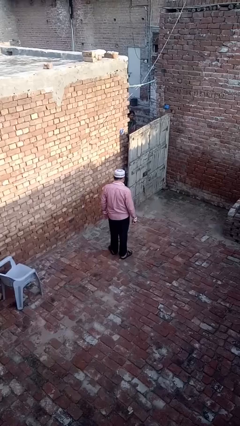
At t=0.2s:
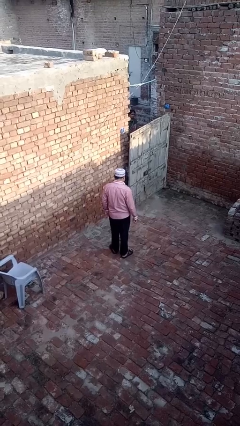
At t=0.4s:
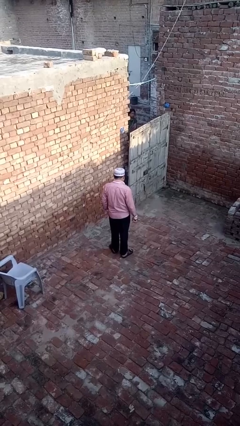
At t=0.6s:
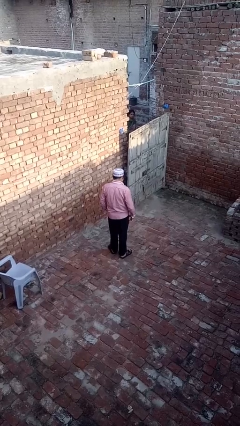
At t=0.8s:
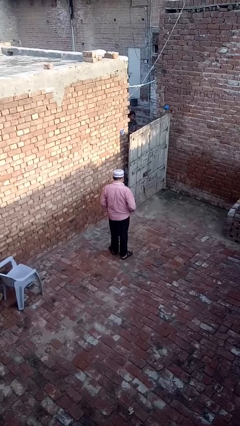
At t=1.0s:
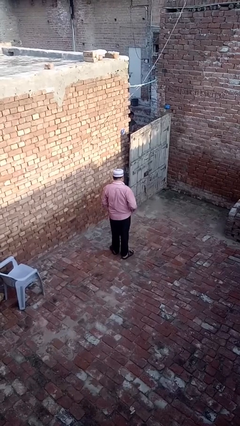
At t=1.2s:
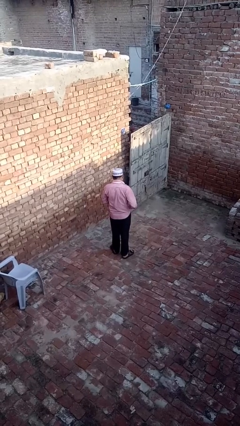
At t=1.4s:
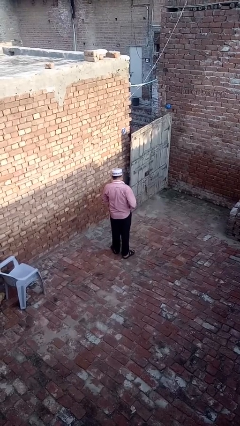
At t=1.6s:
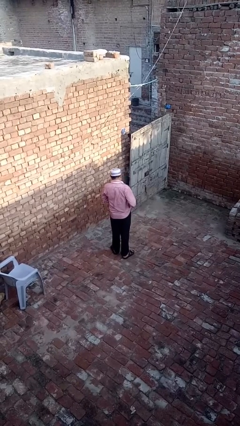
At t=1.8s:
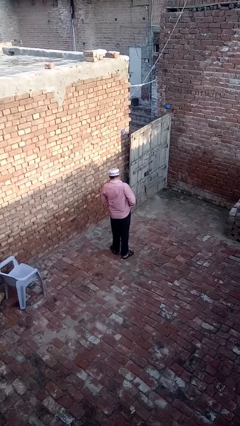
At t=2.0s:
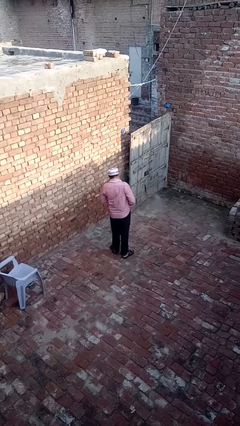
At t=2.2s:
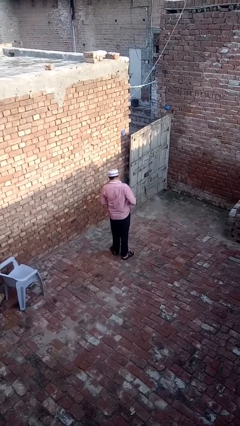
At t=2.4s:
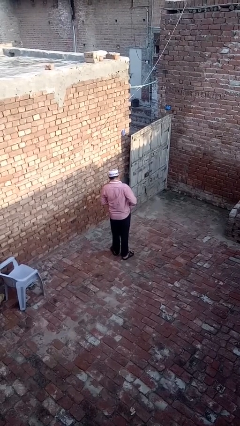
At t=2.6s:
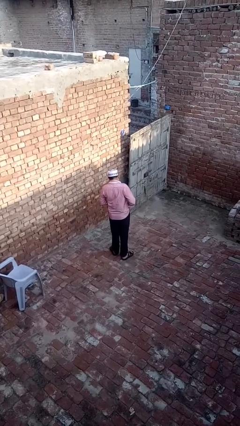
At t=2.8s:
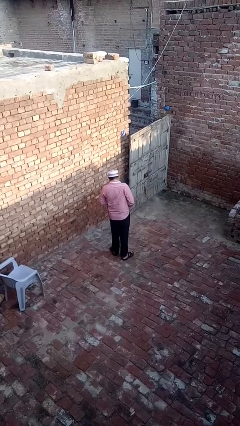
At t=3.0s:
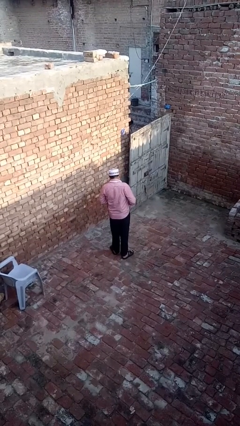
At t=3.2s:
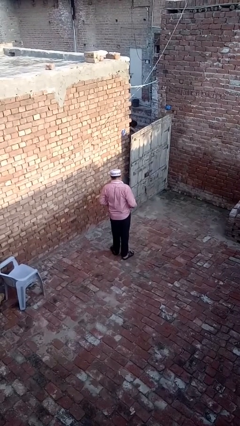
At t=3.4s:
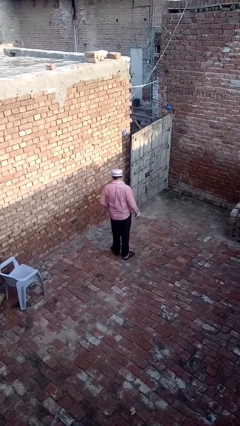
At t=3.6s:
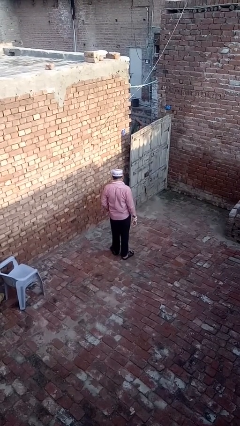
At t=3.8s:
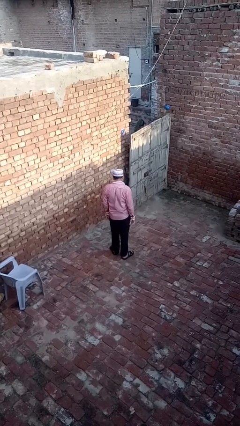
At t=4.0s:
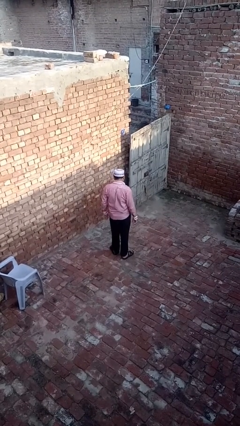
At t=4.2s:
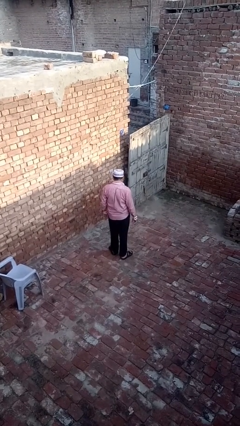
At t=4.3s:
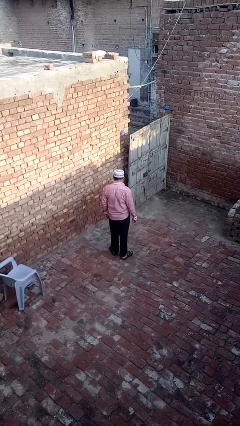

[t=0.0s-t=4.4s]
person tucks in shirt

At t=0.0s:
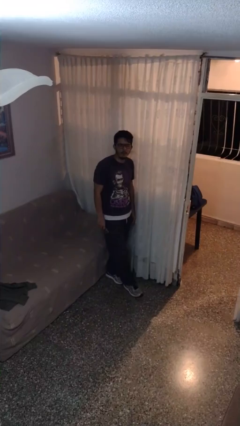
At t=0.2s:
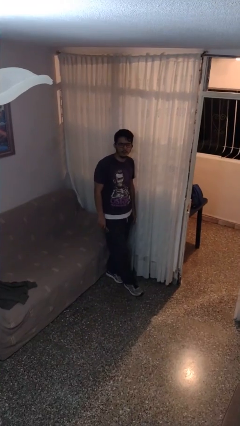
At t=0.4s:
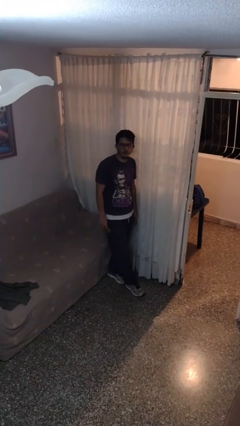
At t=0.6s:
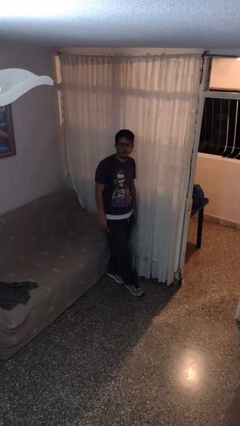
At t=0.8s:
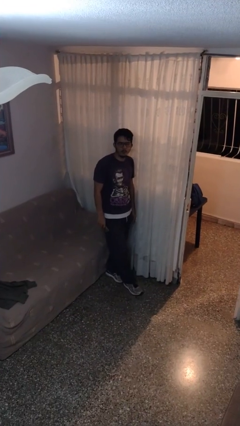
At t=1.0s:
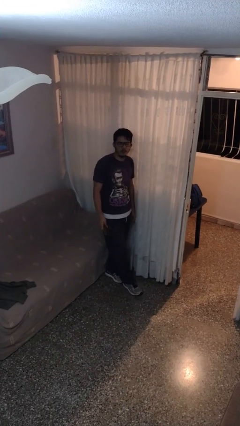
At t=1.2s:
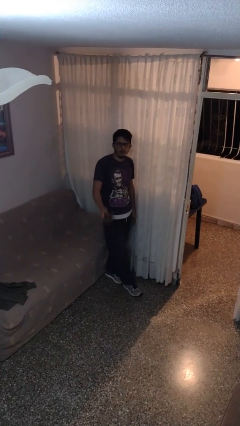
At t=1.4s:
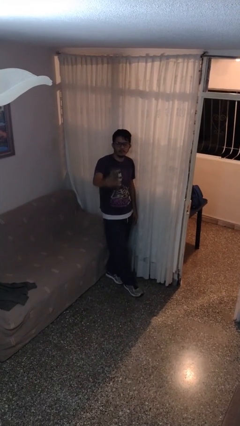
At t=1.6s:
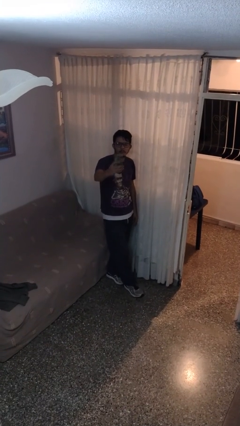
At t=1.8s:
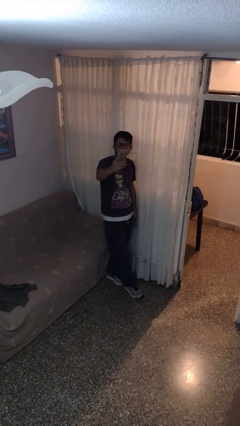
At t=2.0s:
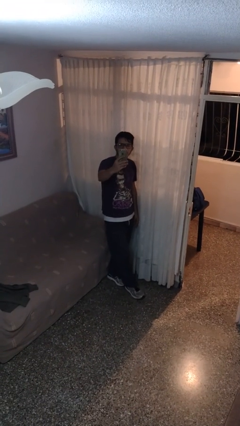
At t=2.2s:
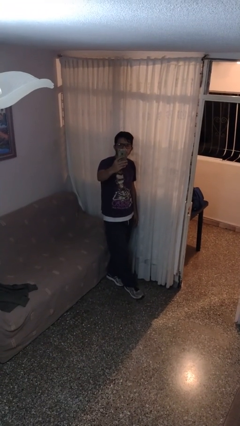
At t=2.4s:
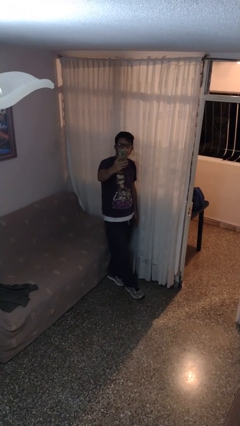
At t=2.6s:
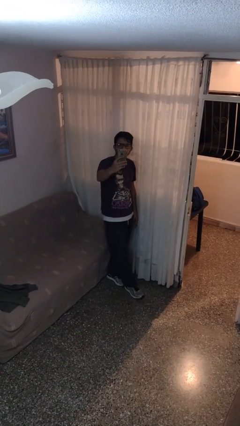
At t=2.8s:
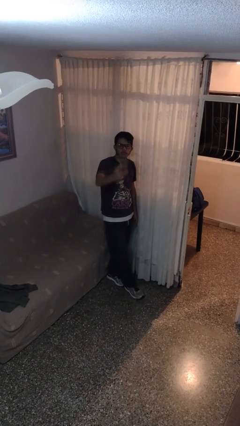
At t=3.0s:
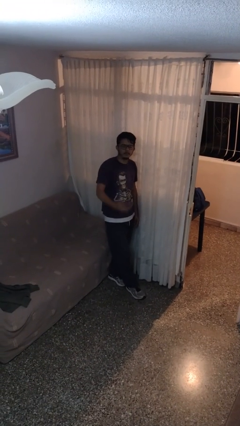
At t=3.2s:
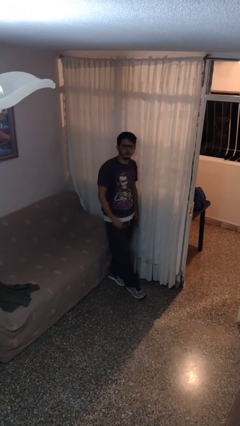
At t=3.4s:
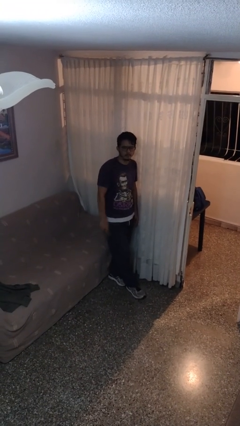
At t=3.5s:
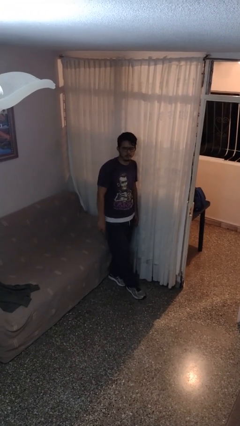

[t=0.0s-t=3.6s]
person takes selfie

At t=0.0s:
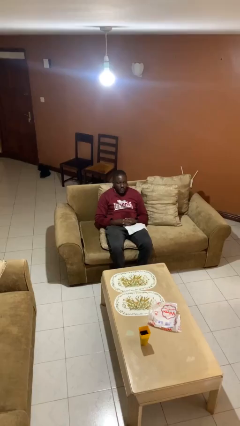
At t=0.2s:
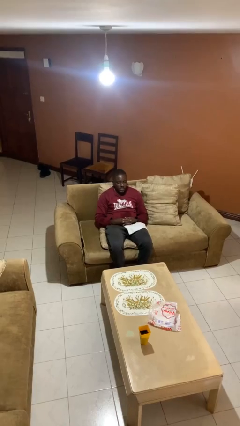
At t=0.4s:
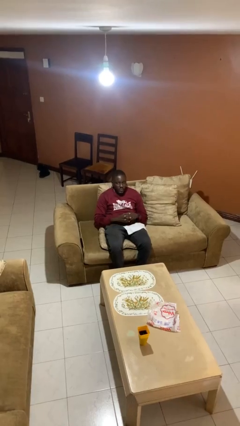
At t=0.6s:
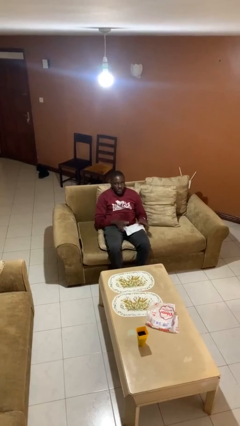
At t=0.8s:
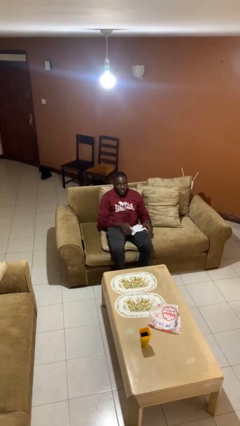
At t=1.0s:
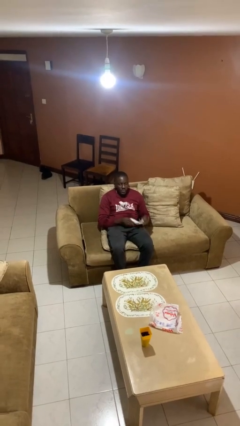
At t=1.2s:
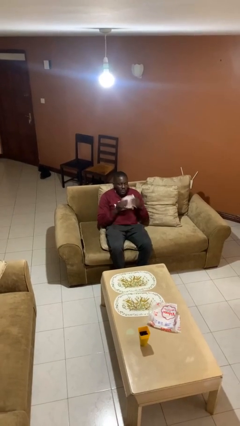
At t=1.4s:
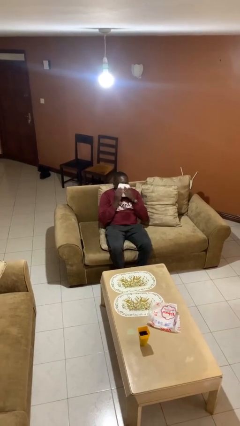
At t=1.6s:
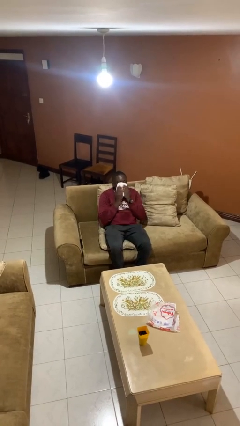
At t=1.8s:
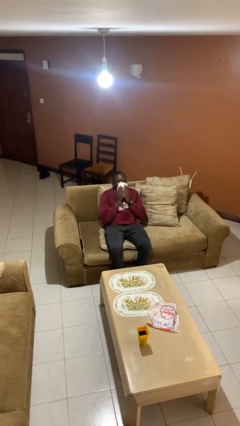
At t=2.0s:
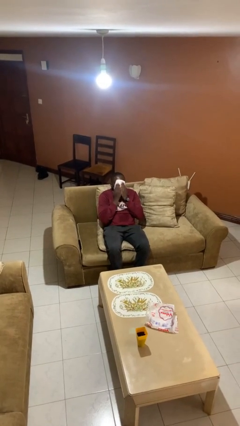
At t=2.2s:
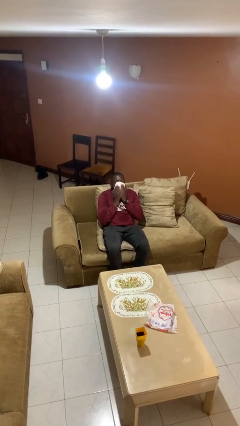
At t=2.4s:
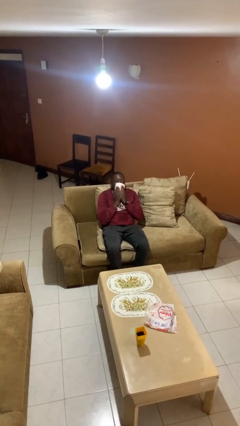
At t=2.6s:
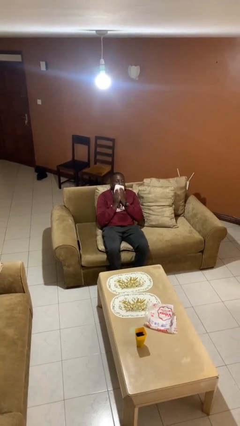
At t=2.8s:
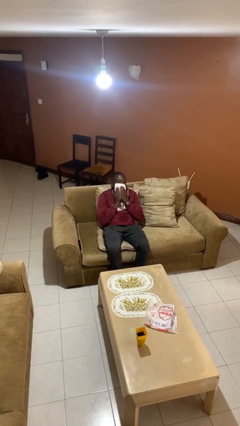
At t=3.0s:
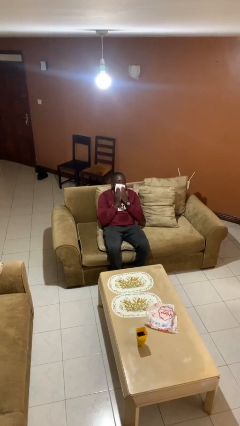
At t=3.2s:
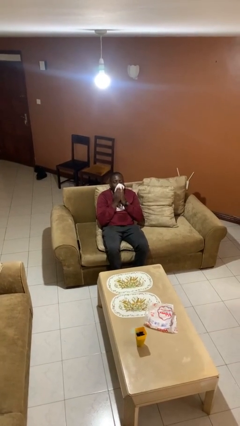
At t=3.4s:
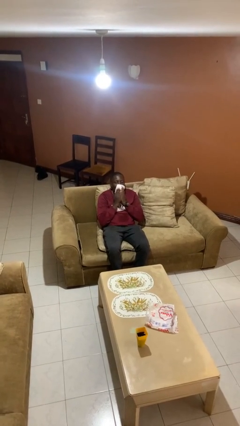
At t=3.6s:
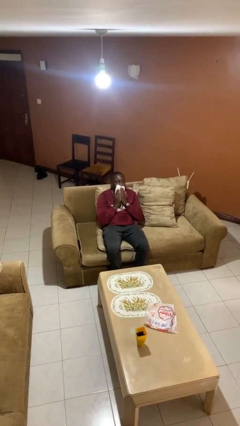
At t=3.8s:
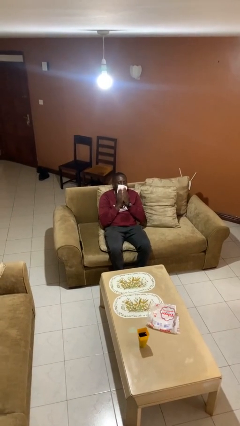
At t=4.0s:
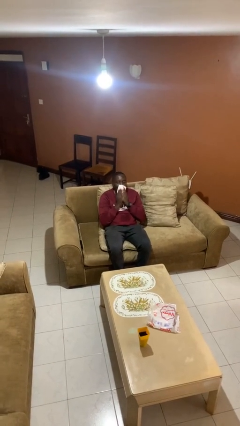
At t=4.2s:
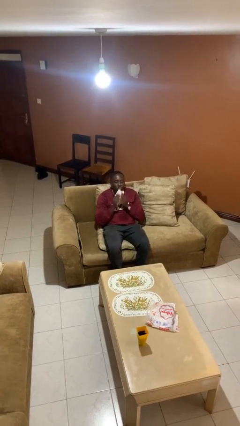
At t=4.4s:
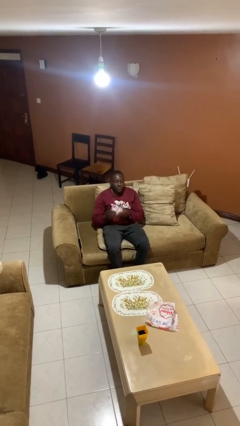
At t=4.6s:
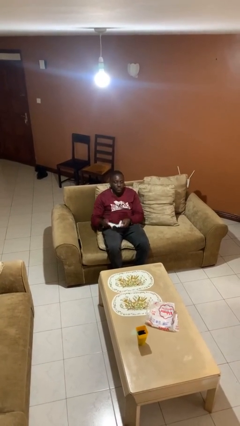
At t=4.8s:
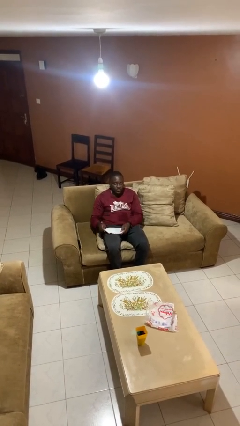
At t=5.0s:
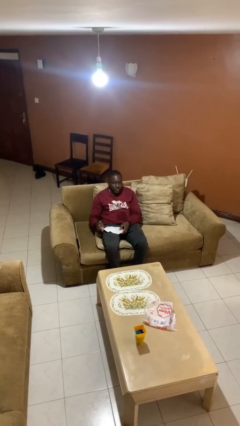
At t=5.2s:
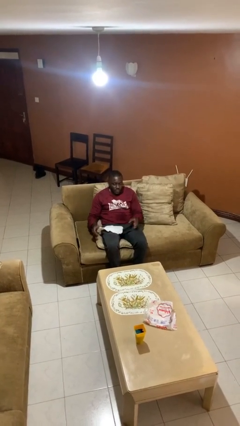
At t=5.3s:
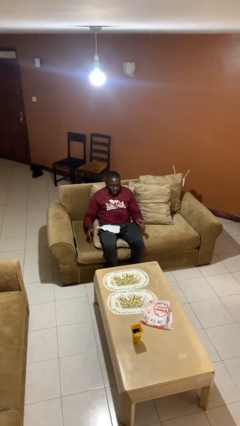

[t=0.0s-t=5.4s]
person wipes mouth with napkin

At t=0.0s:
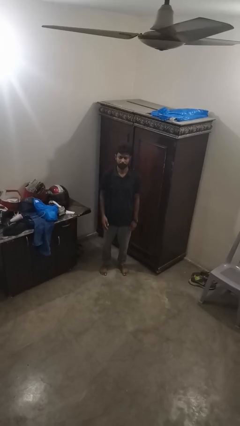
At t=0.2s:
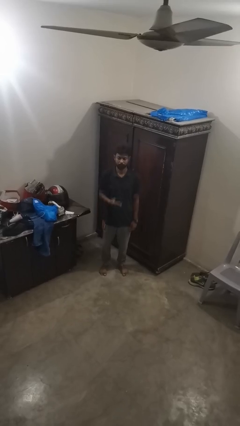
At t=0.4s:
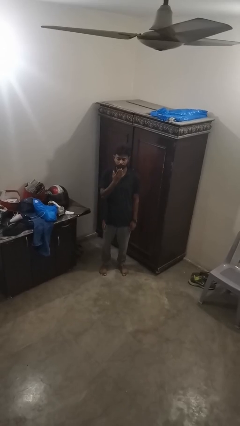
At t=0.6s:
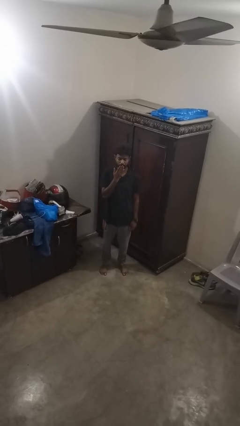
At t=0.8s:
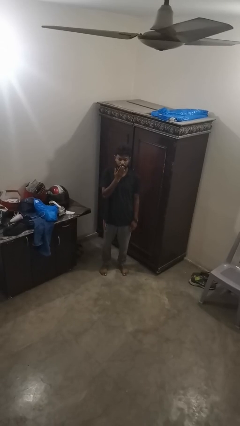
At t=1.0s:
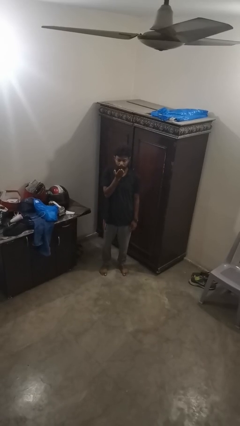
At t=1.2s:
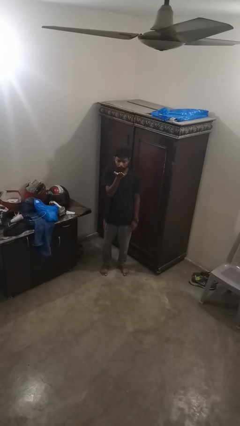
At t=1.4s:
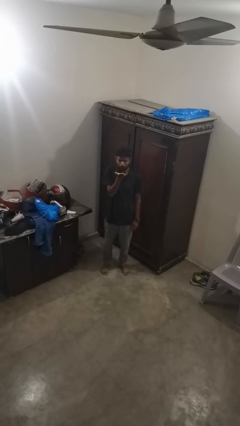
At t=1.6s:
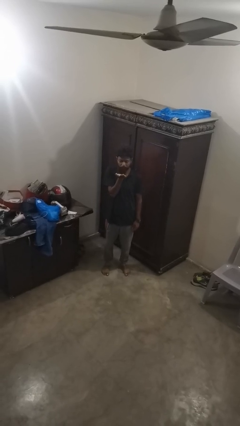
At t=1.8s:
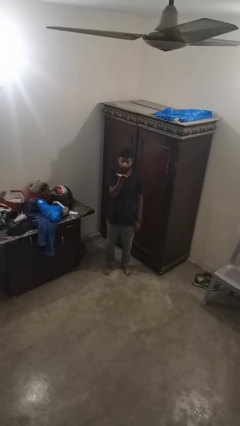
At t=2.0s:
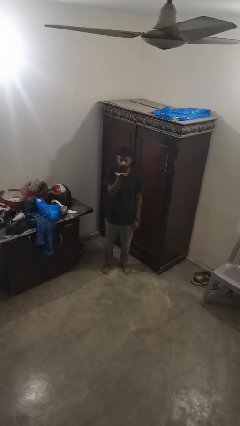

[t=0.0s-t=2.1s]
person gestures blow kiss

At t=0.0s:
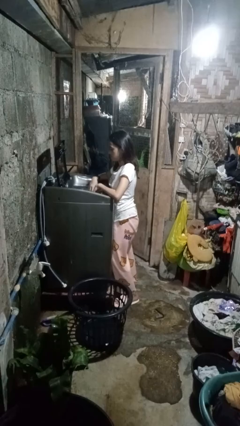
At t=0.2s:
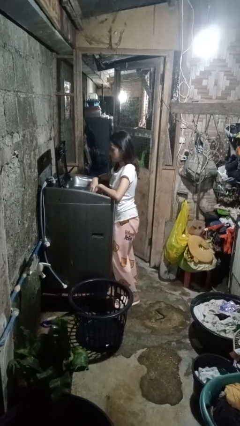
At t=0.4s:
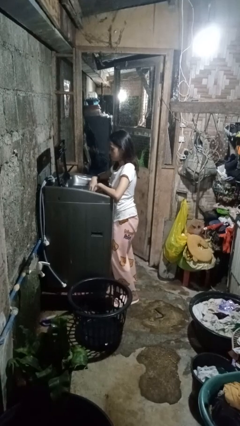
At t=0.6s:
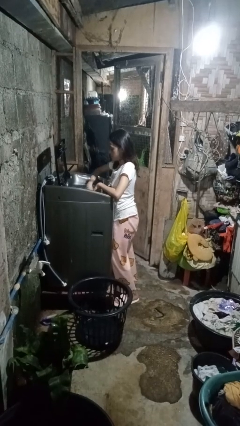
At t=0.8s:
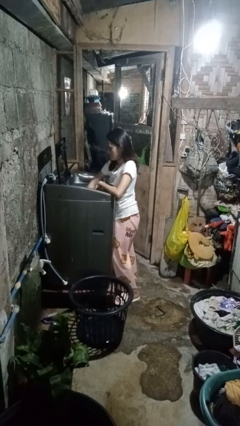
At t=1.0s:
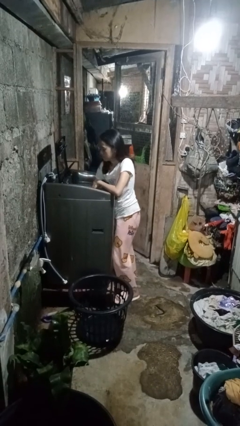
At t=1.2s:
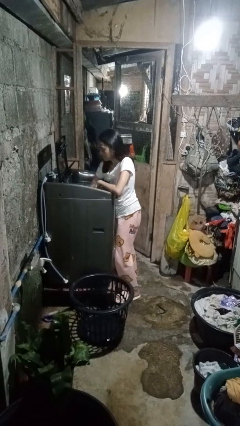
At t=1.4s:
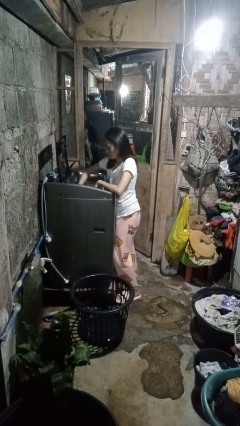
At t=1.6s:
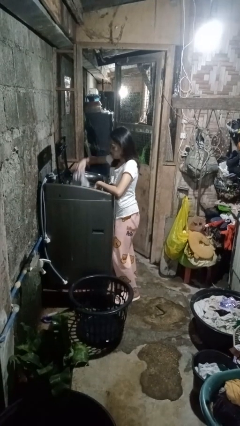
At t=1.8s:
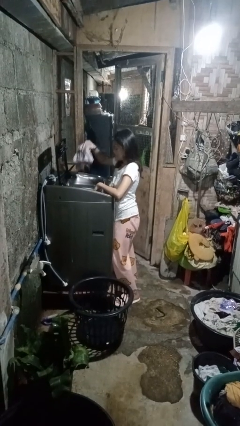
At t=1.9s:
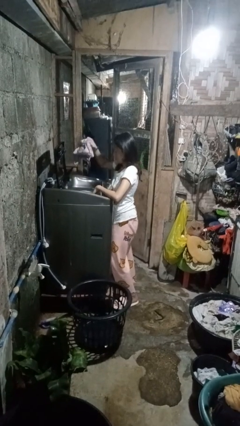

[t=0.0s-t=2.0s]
person unloads clotheswasher
